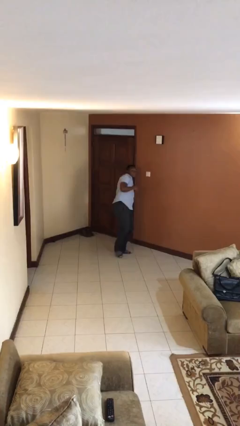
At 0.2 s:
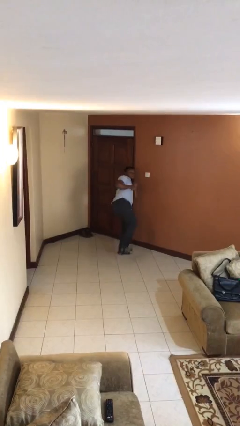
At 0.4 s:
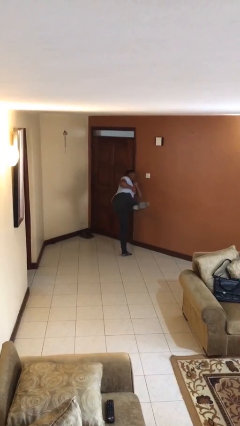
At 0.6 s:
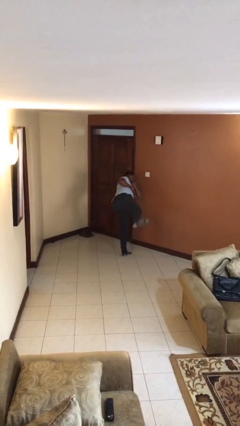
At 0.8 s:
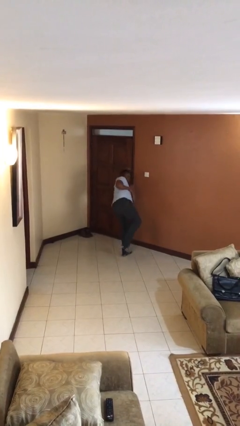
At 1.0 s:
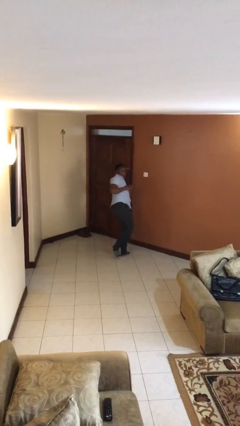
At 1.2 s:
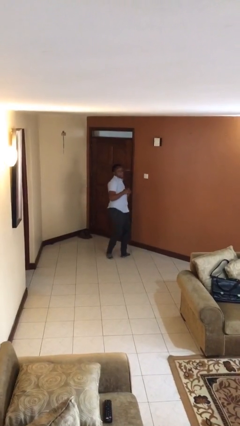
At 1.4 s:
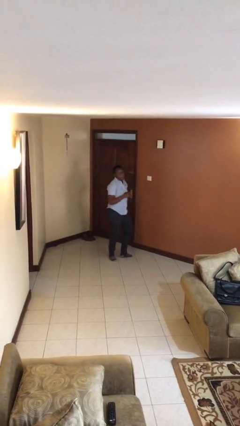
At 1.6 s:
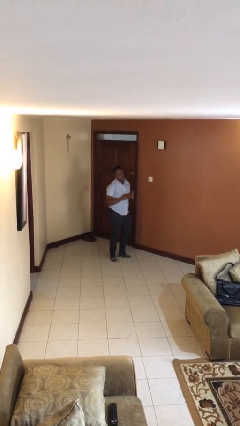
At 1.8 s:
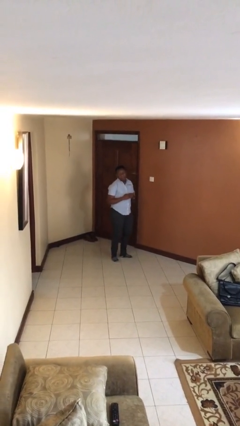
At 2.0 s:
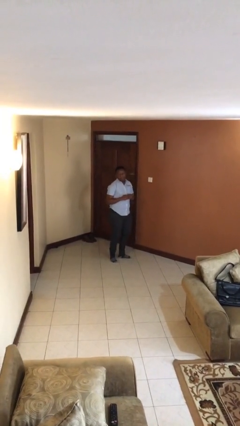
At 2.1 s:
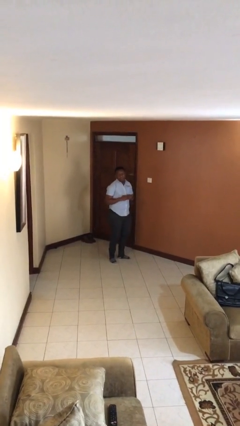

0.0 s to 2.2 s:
person karate kicks

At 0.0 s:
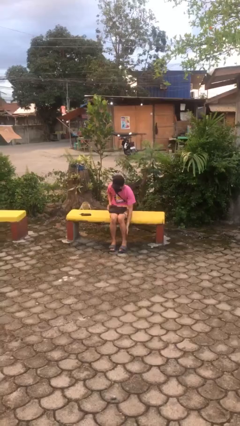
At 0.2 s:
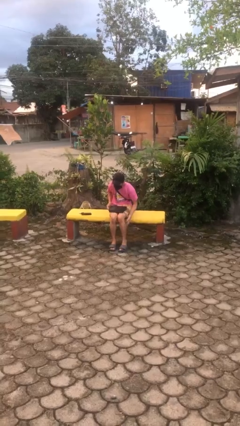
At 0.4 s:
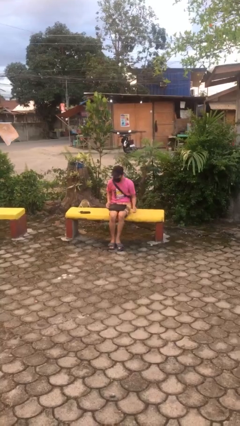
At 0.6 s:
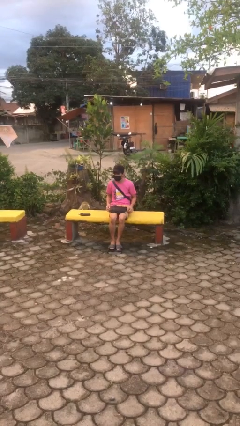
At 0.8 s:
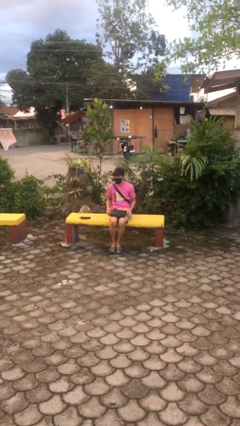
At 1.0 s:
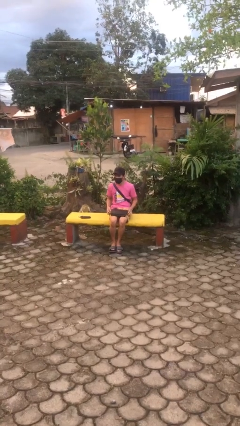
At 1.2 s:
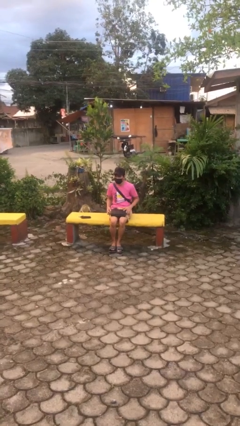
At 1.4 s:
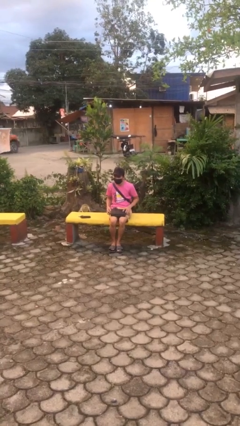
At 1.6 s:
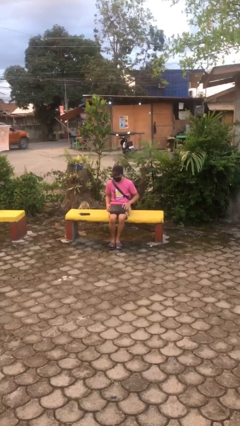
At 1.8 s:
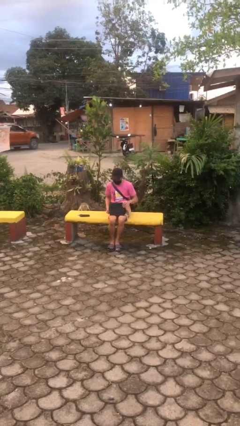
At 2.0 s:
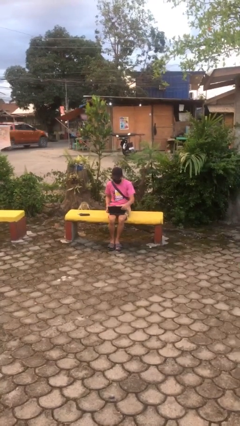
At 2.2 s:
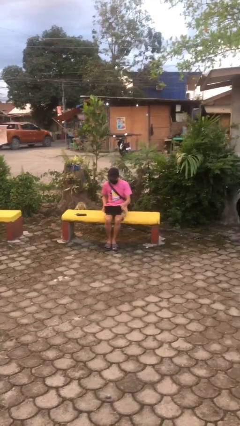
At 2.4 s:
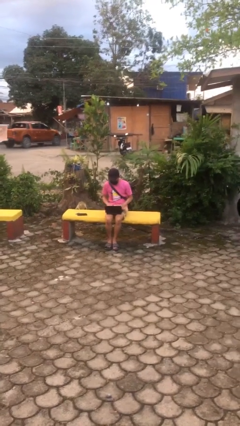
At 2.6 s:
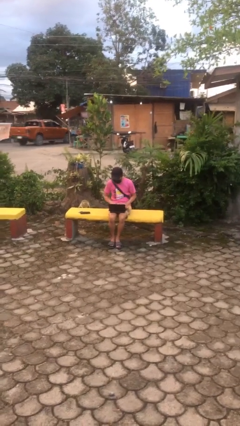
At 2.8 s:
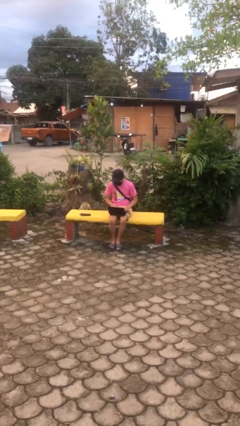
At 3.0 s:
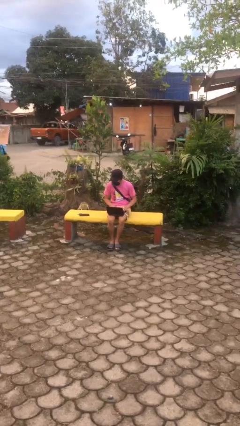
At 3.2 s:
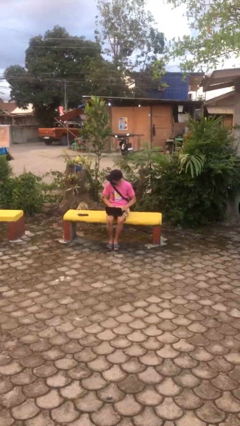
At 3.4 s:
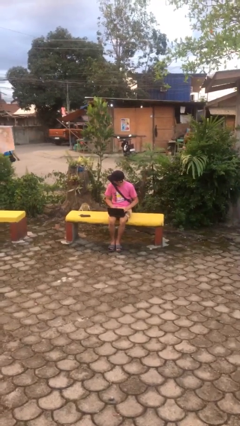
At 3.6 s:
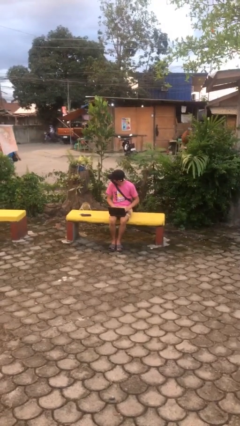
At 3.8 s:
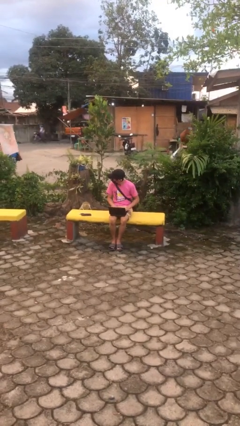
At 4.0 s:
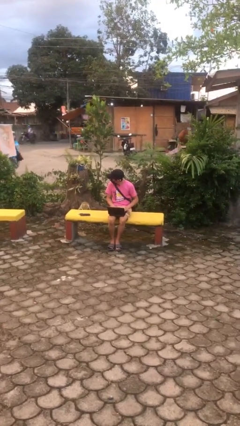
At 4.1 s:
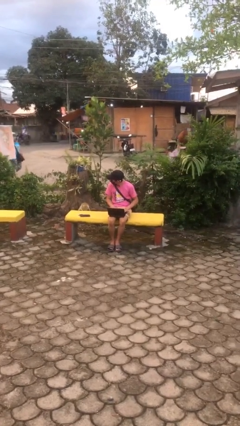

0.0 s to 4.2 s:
person interacts with laptop

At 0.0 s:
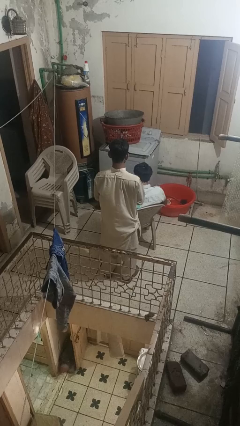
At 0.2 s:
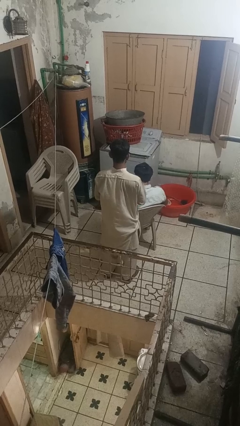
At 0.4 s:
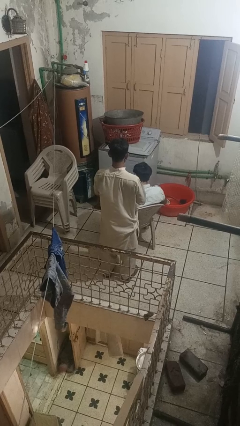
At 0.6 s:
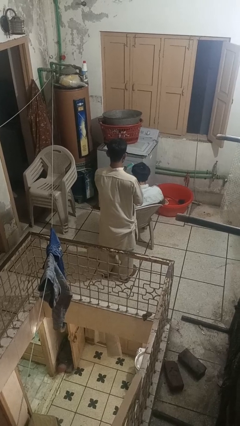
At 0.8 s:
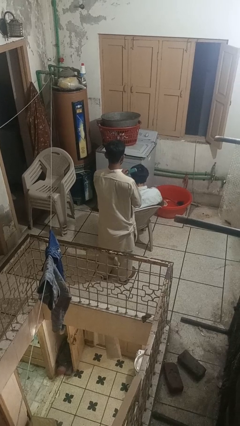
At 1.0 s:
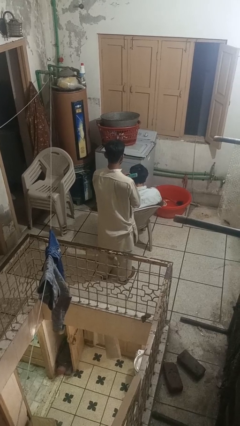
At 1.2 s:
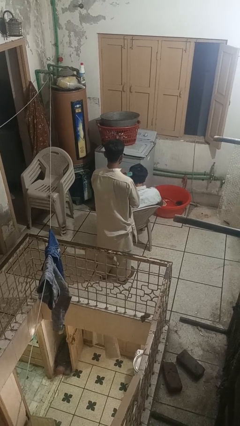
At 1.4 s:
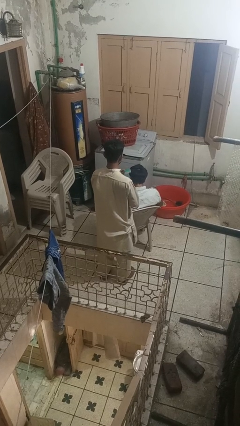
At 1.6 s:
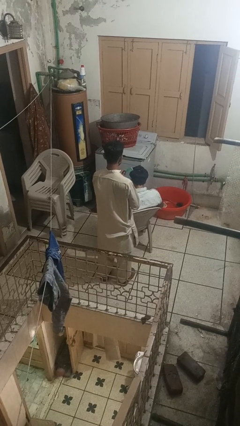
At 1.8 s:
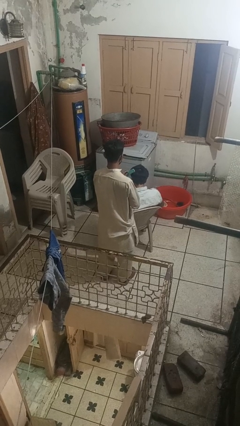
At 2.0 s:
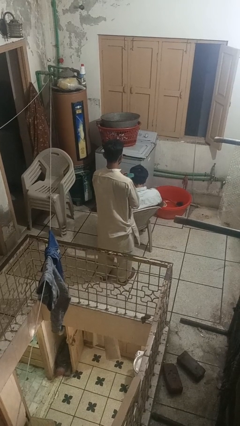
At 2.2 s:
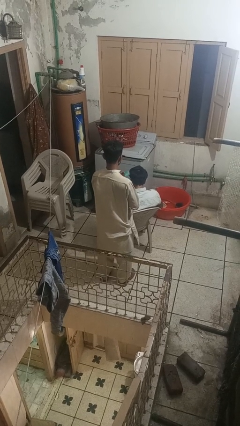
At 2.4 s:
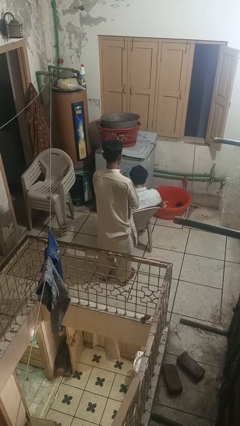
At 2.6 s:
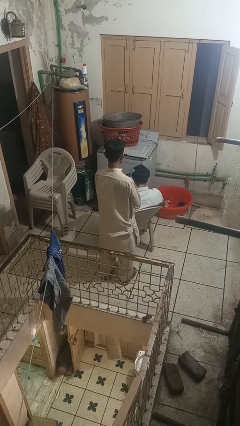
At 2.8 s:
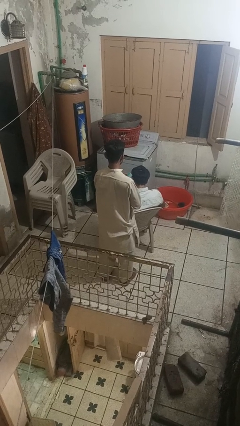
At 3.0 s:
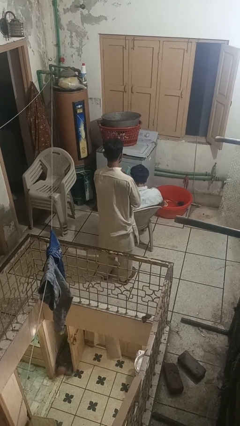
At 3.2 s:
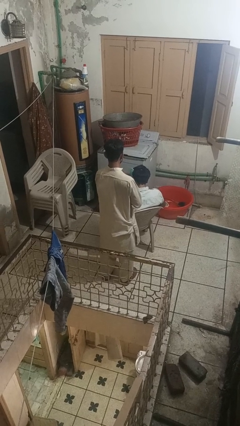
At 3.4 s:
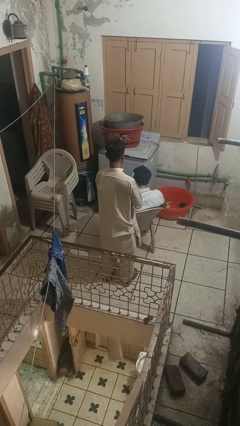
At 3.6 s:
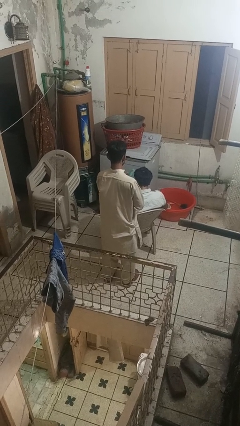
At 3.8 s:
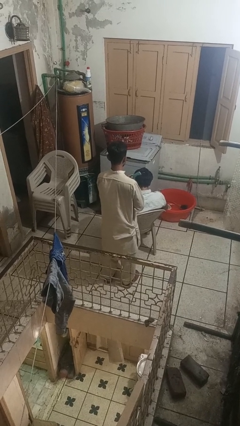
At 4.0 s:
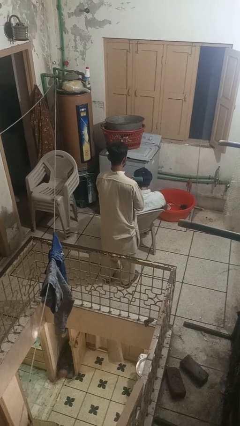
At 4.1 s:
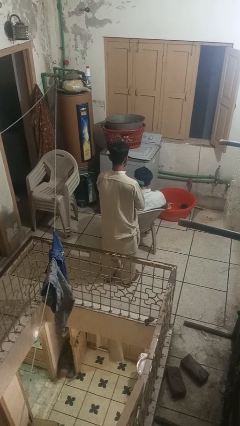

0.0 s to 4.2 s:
person brushes hair of person

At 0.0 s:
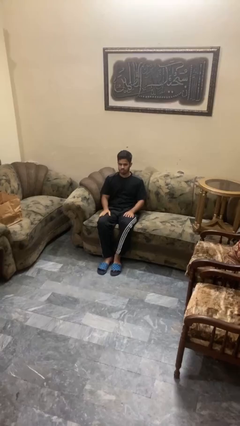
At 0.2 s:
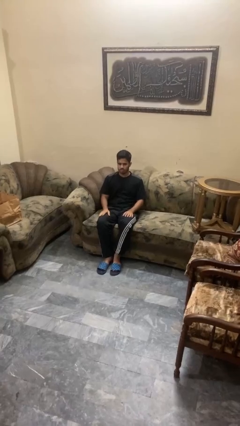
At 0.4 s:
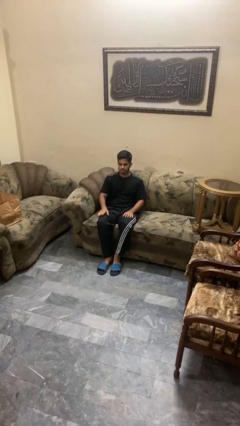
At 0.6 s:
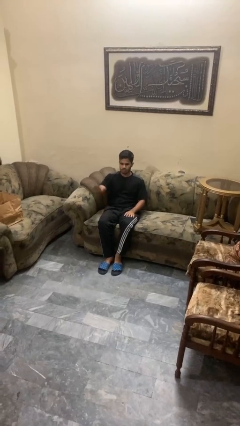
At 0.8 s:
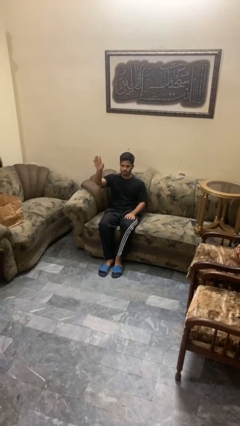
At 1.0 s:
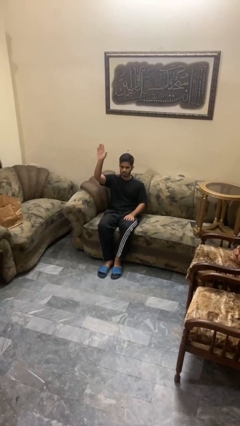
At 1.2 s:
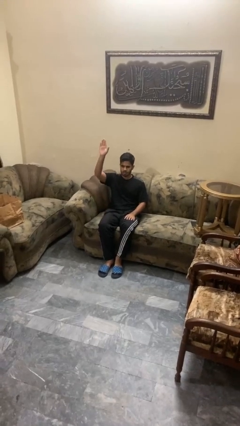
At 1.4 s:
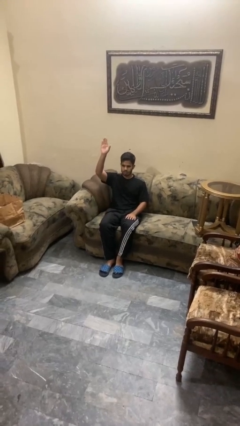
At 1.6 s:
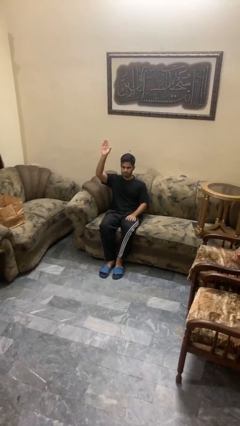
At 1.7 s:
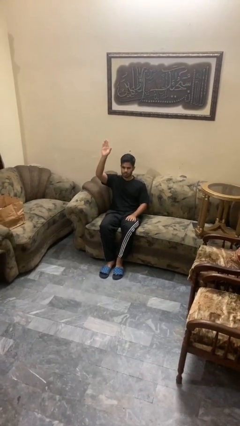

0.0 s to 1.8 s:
person gestures raise hand

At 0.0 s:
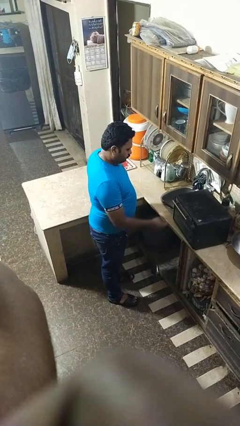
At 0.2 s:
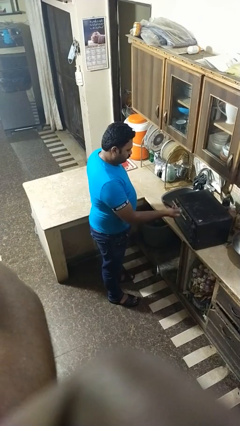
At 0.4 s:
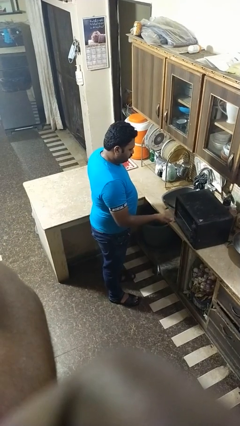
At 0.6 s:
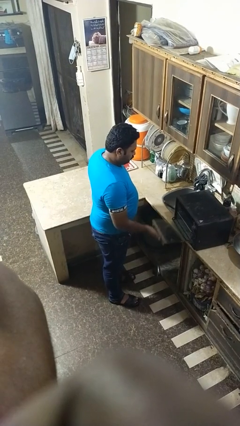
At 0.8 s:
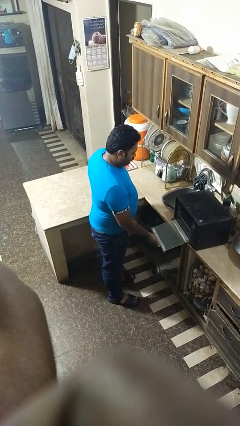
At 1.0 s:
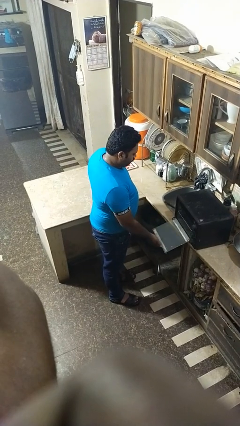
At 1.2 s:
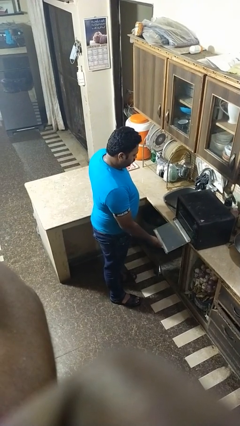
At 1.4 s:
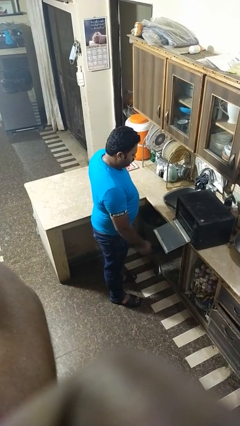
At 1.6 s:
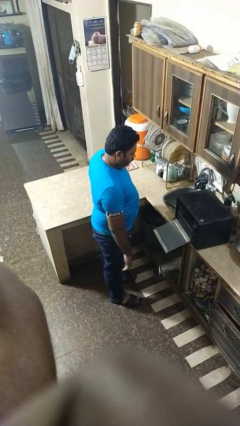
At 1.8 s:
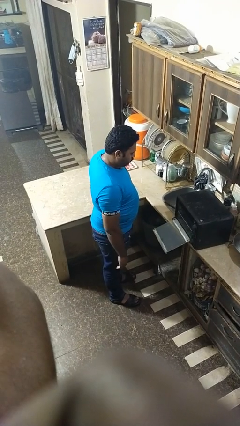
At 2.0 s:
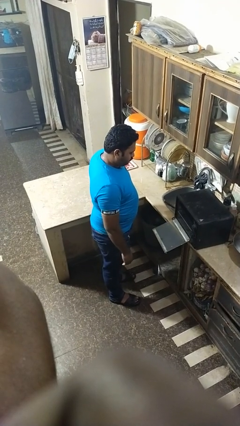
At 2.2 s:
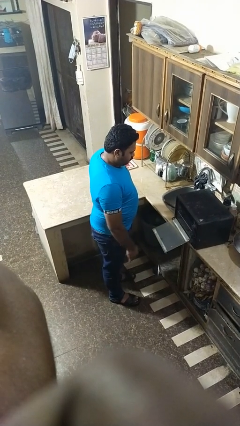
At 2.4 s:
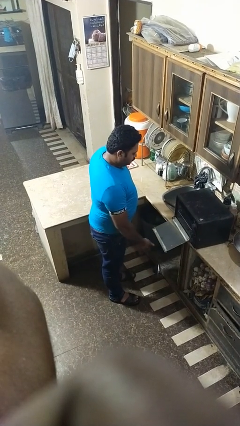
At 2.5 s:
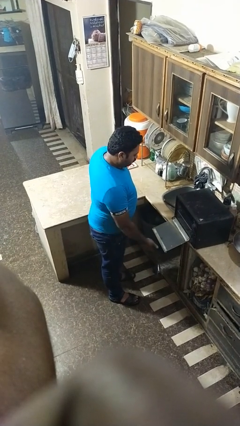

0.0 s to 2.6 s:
person opens oven door

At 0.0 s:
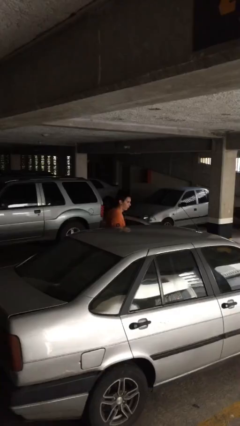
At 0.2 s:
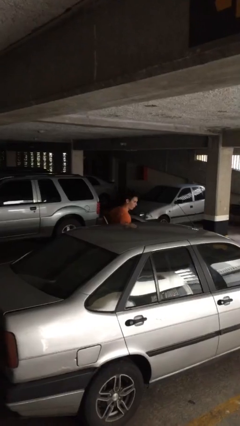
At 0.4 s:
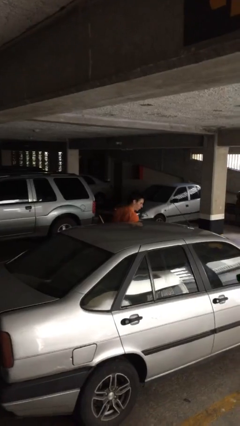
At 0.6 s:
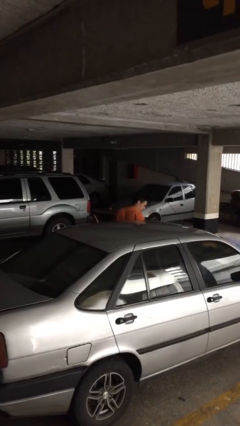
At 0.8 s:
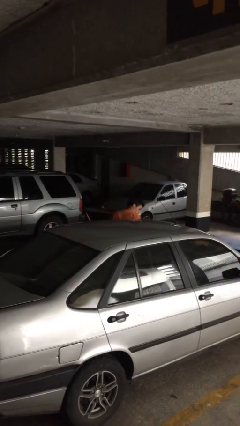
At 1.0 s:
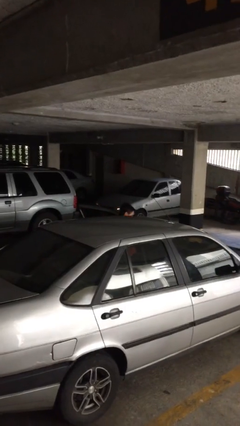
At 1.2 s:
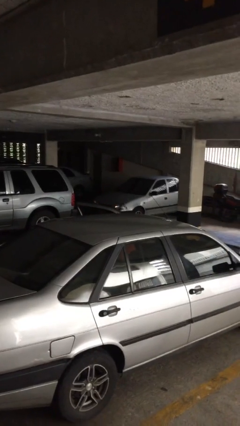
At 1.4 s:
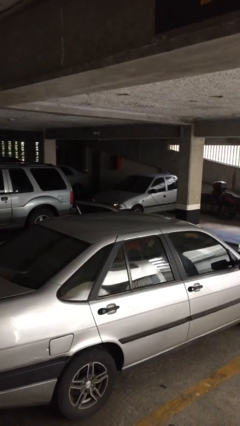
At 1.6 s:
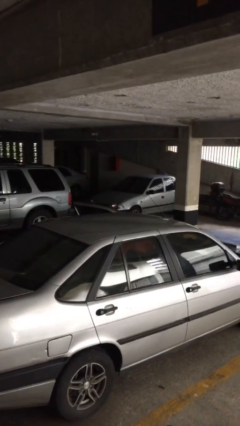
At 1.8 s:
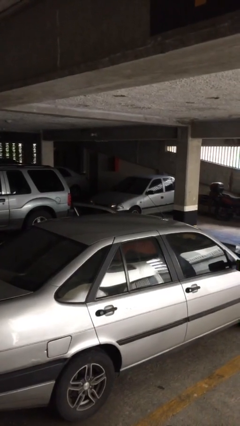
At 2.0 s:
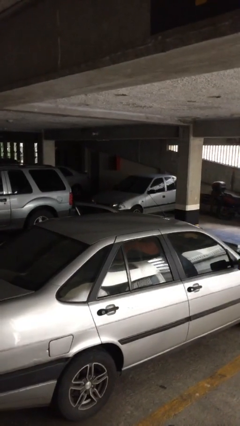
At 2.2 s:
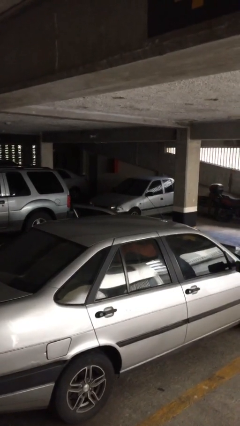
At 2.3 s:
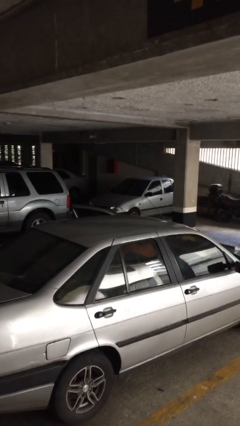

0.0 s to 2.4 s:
person enters car
